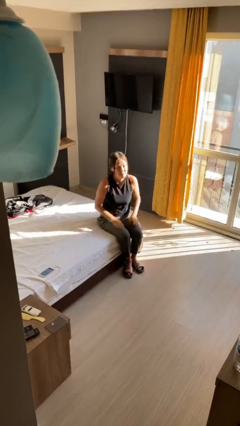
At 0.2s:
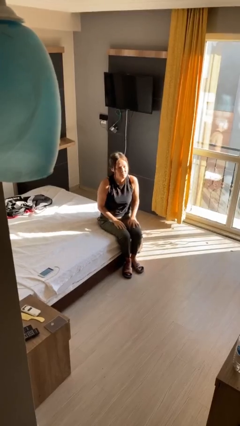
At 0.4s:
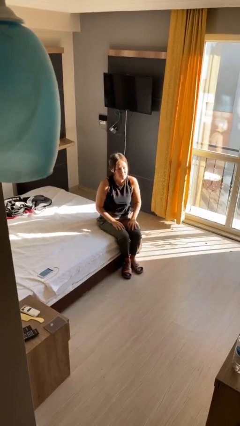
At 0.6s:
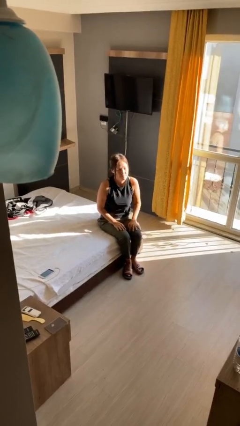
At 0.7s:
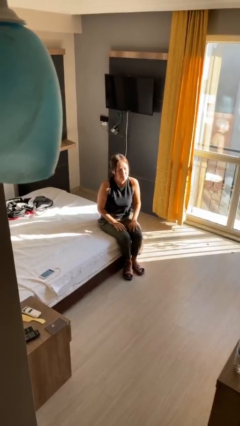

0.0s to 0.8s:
person rubs eyes

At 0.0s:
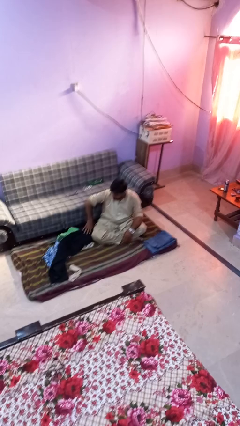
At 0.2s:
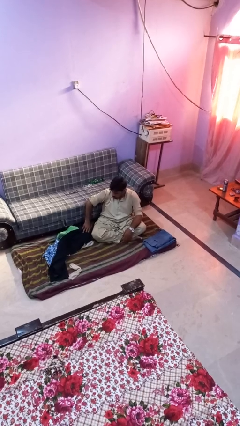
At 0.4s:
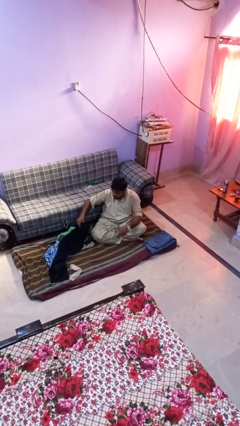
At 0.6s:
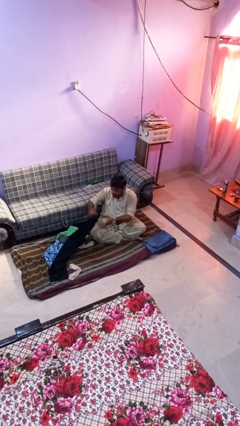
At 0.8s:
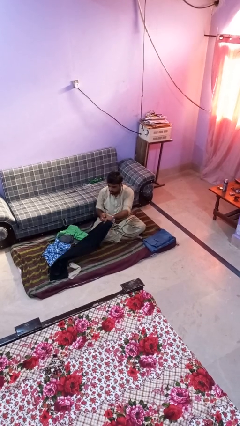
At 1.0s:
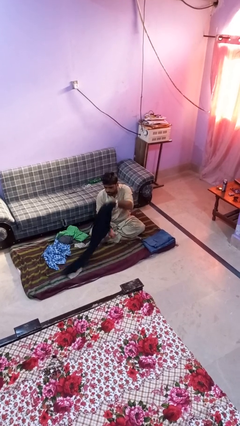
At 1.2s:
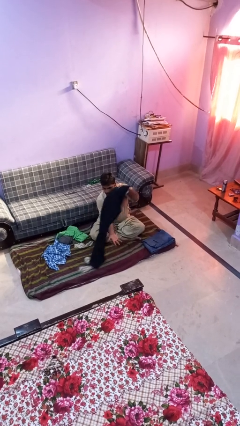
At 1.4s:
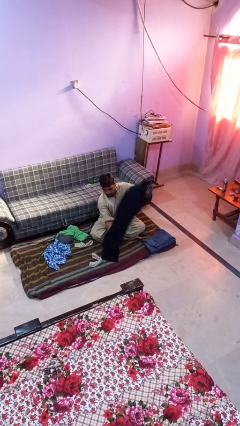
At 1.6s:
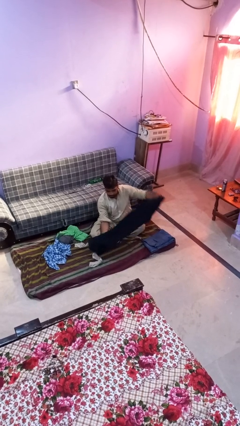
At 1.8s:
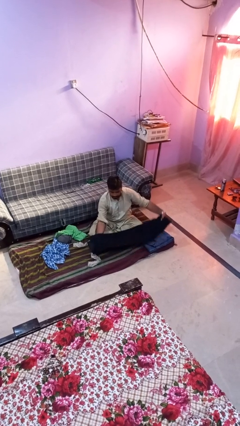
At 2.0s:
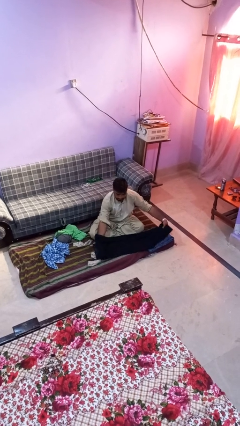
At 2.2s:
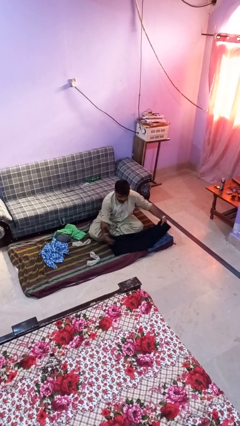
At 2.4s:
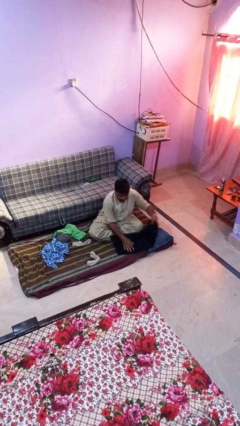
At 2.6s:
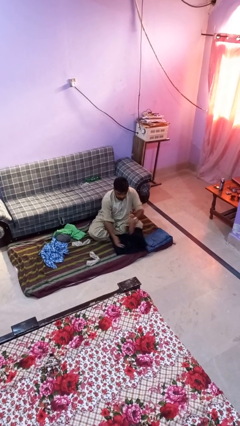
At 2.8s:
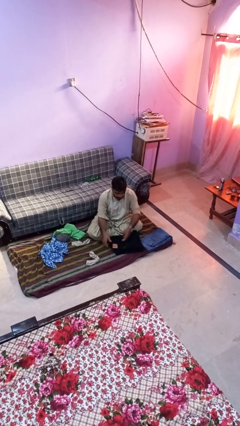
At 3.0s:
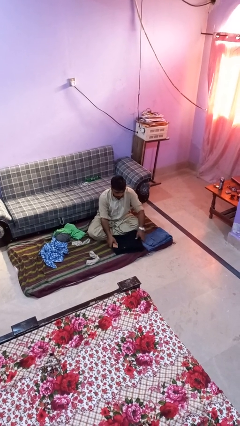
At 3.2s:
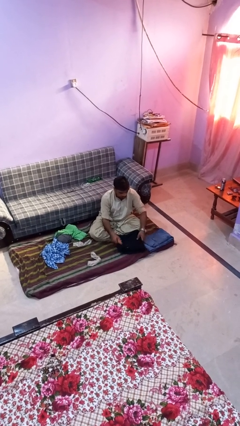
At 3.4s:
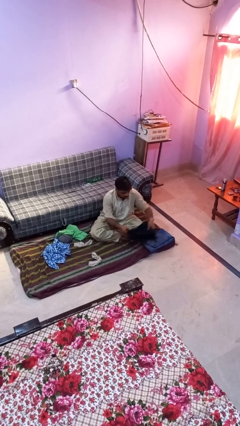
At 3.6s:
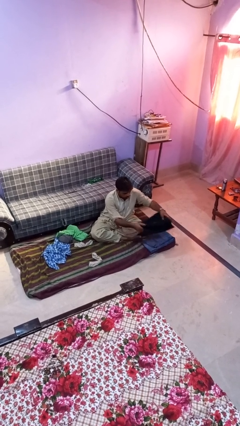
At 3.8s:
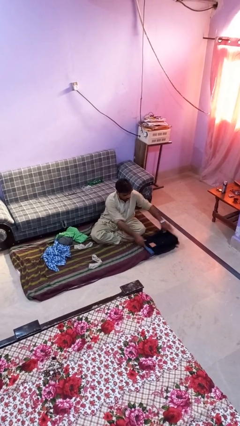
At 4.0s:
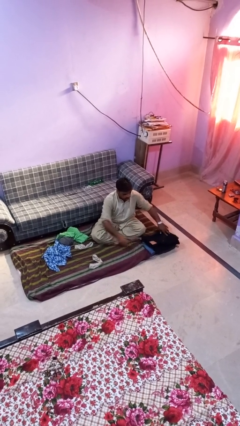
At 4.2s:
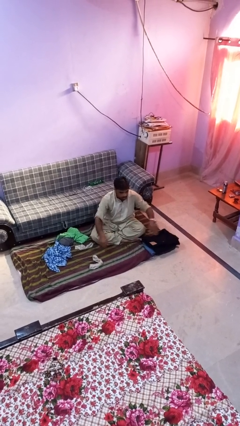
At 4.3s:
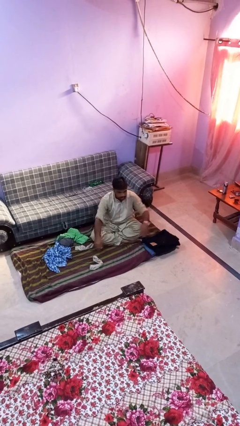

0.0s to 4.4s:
person folds pants

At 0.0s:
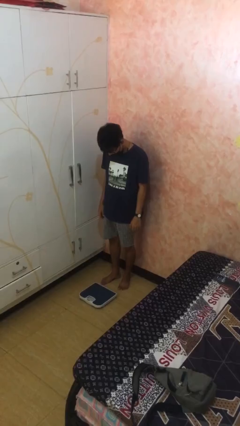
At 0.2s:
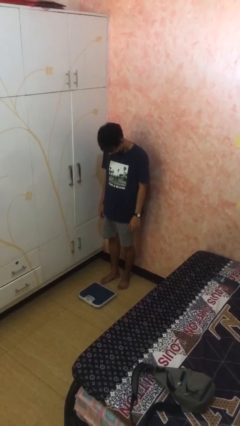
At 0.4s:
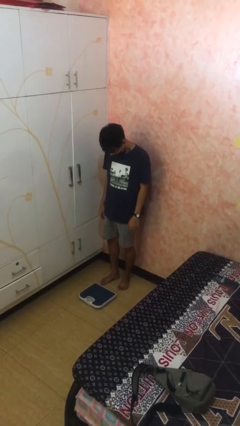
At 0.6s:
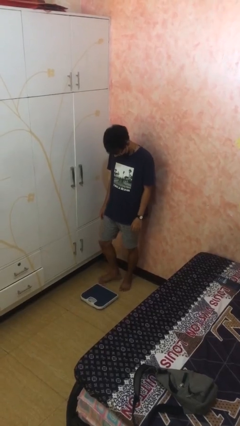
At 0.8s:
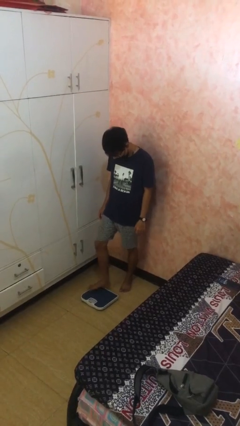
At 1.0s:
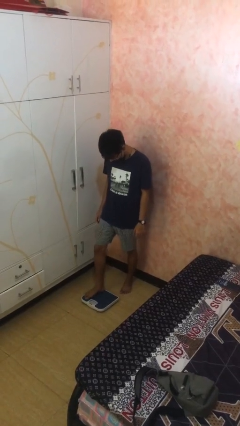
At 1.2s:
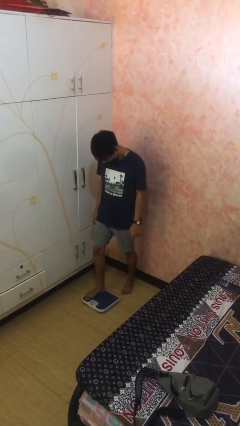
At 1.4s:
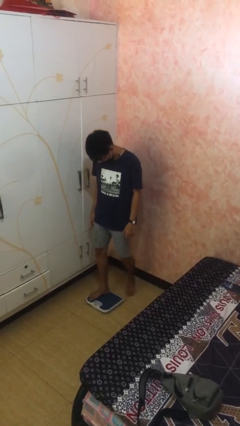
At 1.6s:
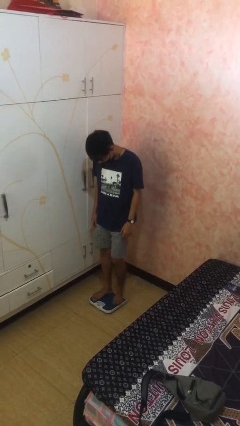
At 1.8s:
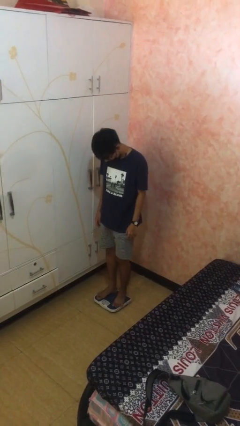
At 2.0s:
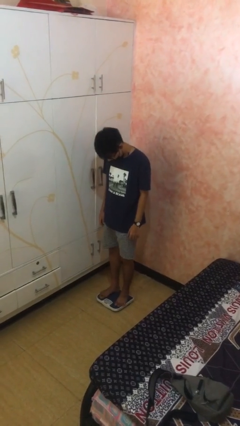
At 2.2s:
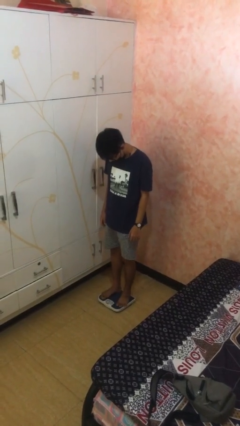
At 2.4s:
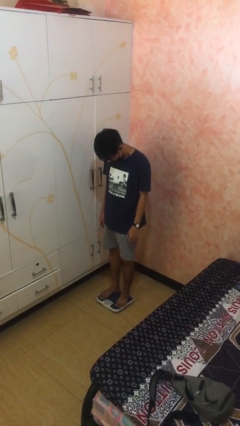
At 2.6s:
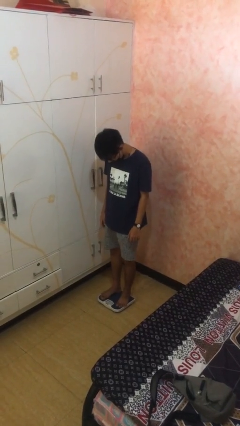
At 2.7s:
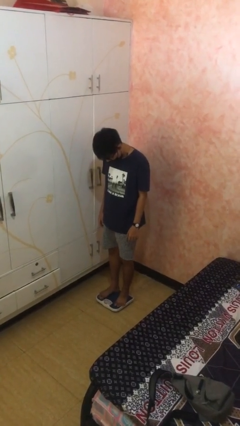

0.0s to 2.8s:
person uses bodyweight scale

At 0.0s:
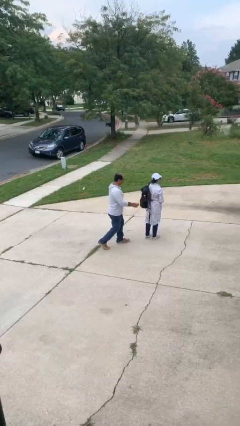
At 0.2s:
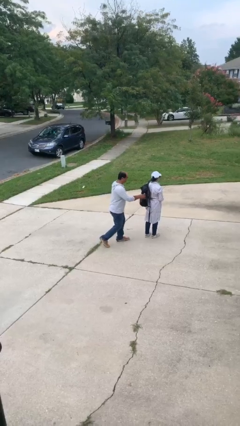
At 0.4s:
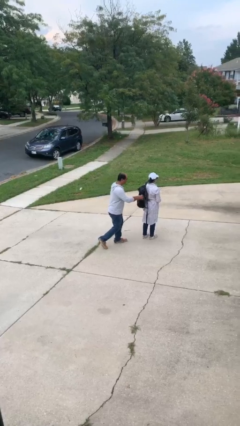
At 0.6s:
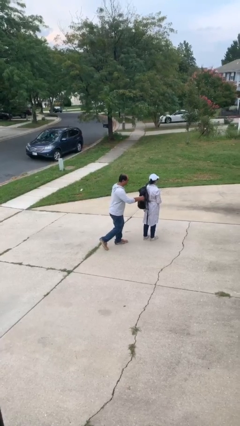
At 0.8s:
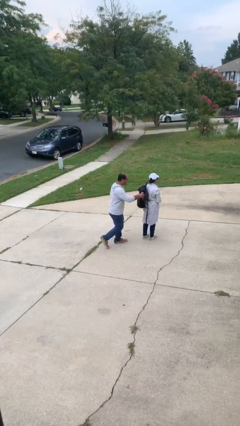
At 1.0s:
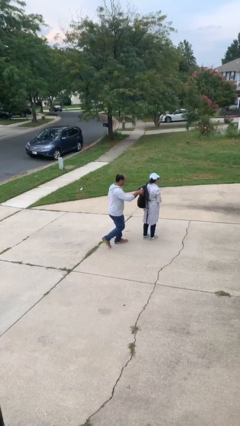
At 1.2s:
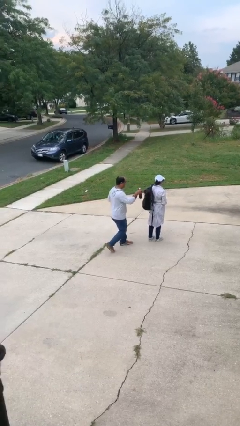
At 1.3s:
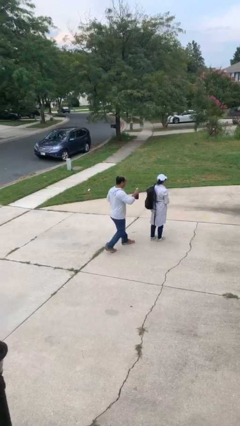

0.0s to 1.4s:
person steals object from person

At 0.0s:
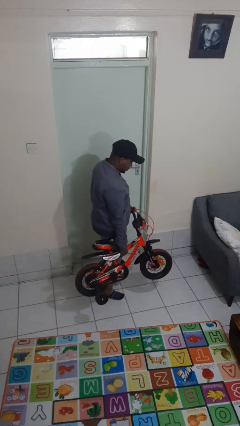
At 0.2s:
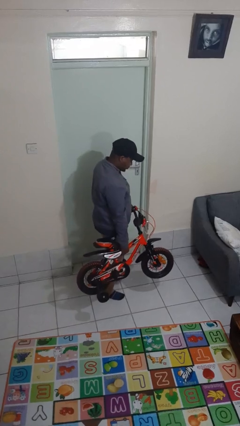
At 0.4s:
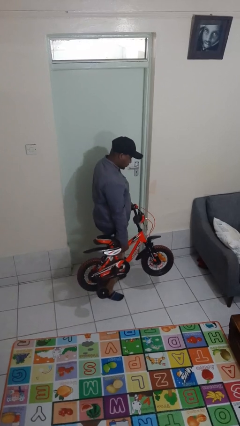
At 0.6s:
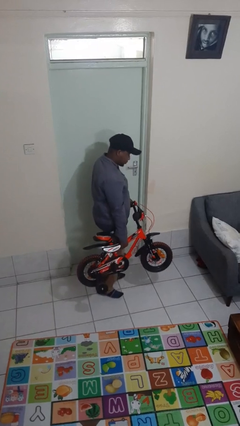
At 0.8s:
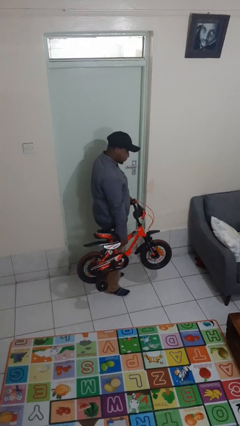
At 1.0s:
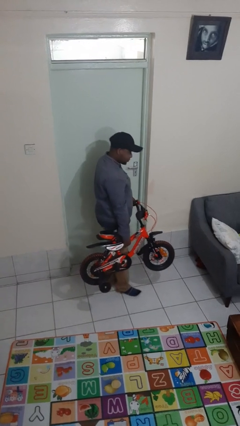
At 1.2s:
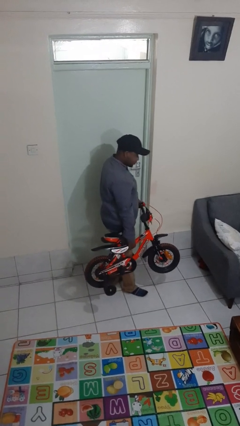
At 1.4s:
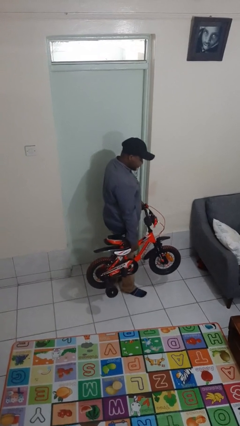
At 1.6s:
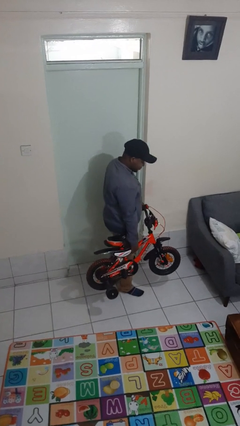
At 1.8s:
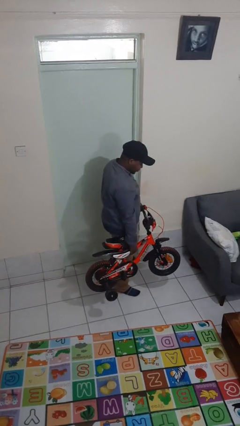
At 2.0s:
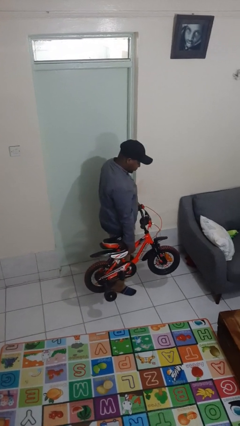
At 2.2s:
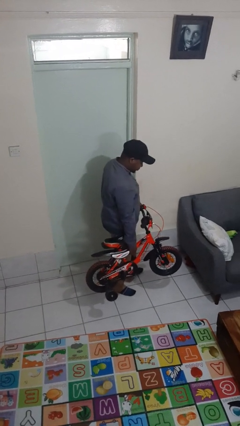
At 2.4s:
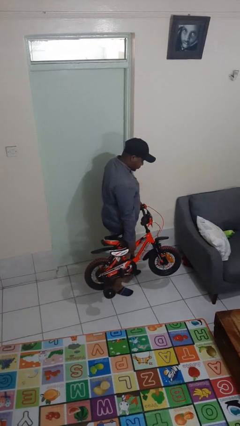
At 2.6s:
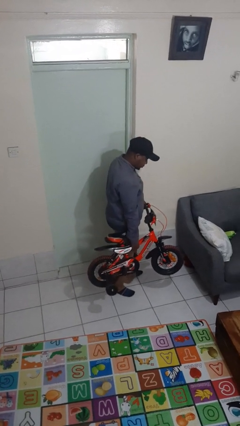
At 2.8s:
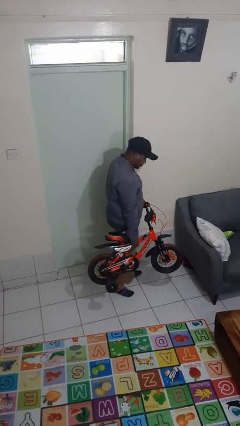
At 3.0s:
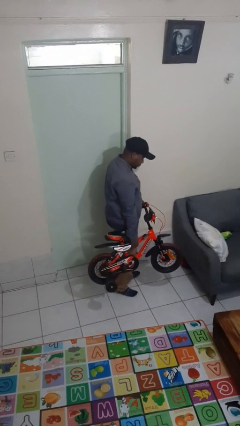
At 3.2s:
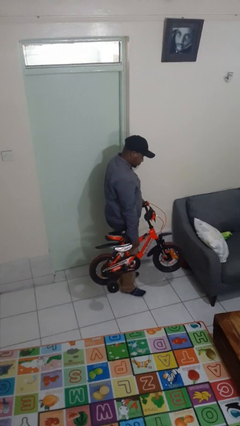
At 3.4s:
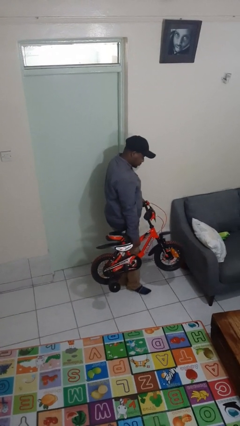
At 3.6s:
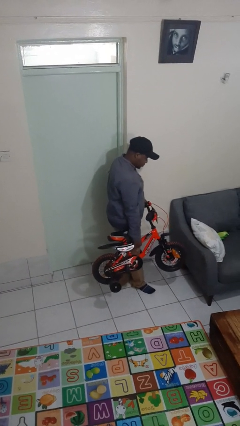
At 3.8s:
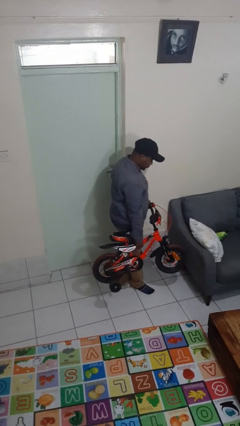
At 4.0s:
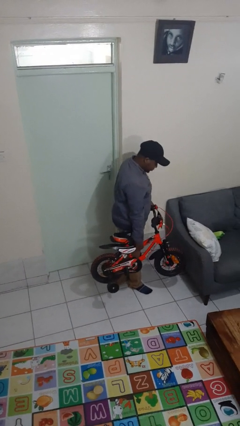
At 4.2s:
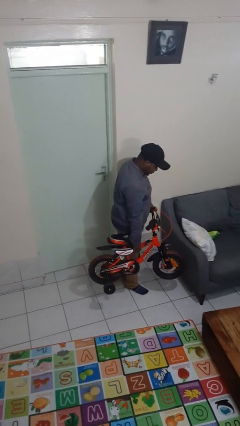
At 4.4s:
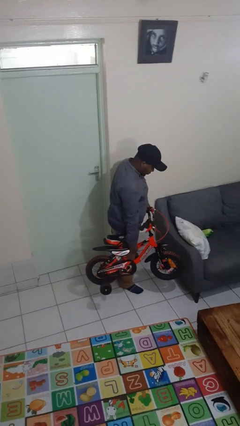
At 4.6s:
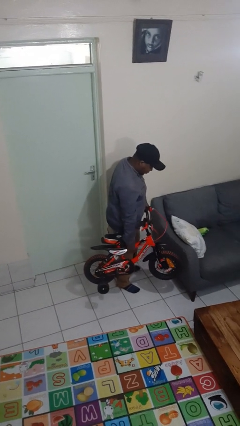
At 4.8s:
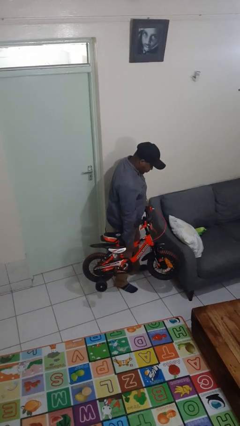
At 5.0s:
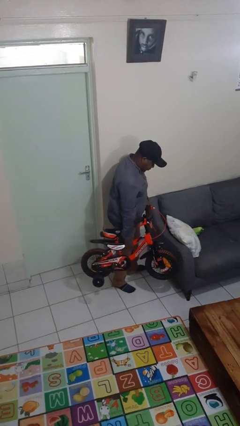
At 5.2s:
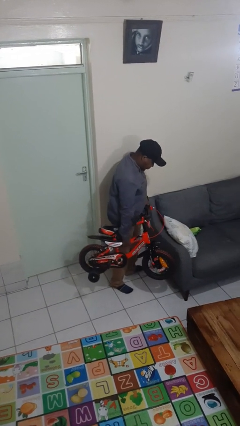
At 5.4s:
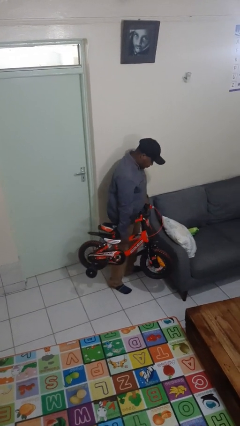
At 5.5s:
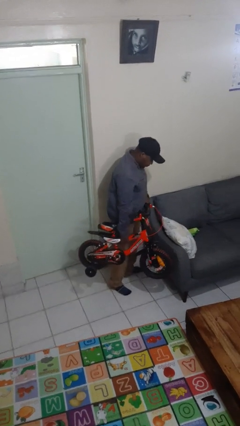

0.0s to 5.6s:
person carries bicycle

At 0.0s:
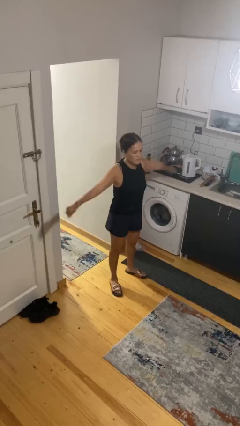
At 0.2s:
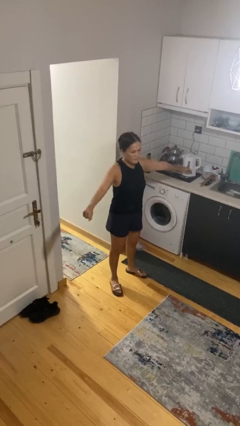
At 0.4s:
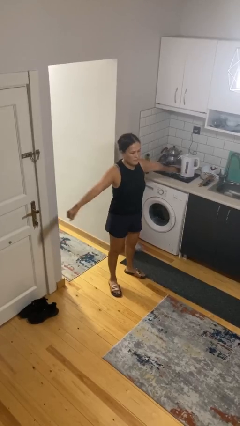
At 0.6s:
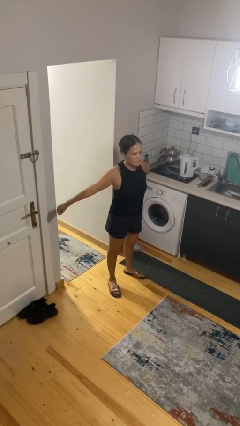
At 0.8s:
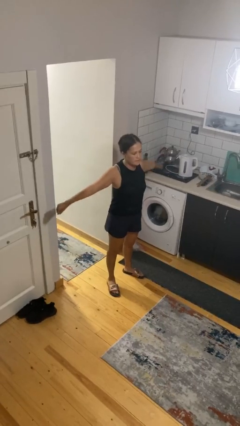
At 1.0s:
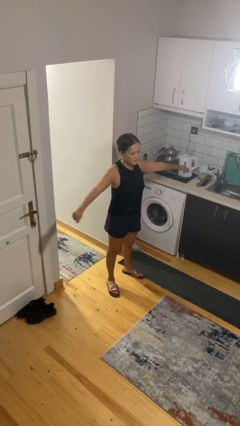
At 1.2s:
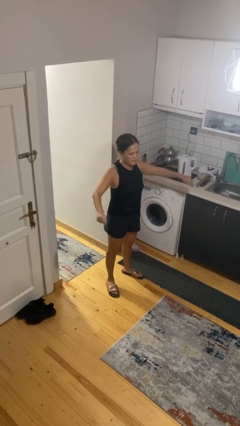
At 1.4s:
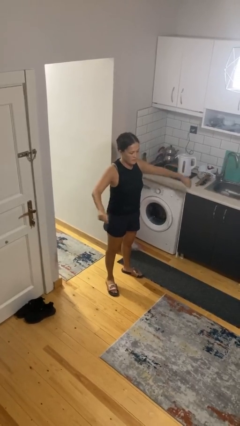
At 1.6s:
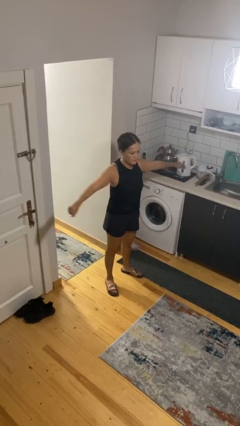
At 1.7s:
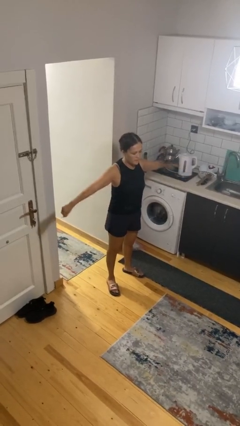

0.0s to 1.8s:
person stretches arms to side

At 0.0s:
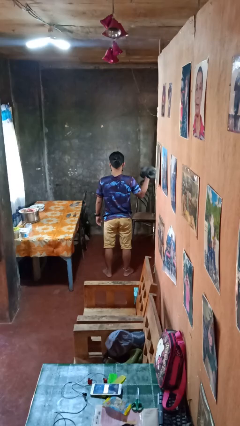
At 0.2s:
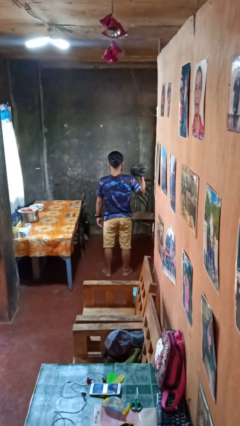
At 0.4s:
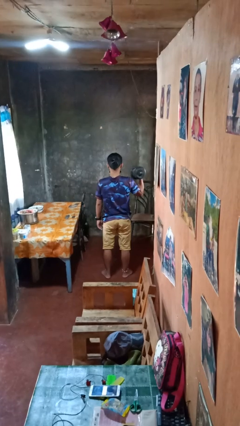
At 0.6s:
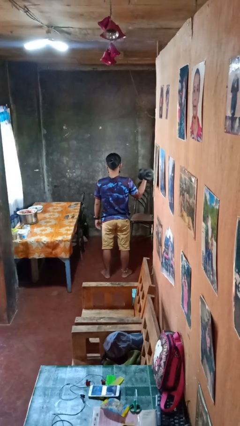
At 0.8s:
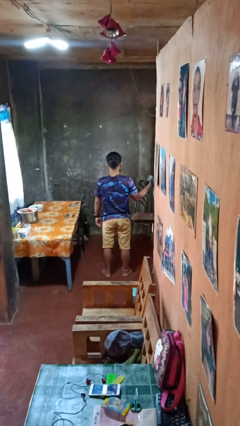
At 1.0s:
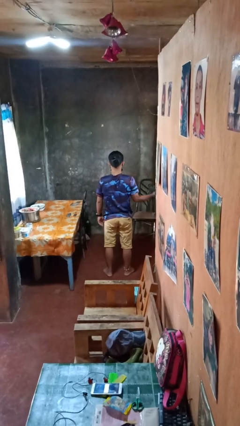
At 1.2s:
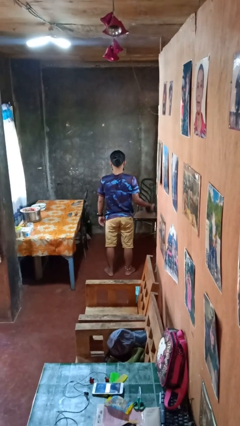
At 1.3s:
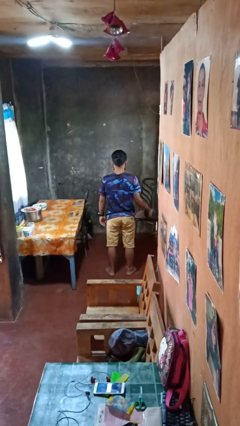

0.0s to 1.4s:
person lifts dumbbells
